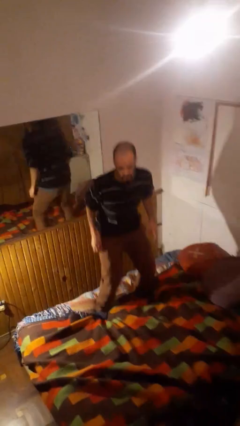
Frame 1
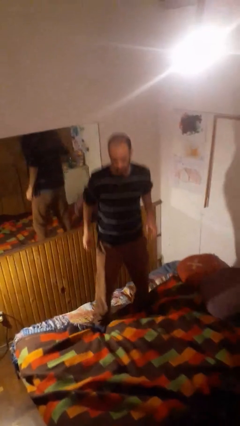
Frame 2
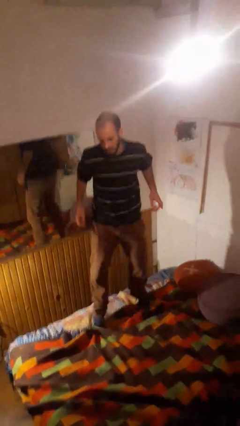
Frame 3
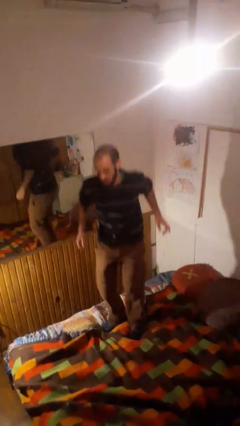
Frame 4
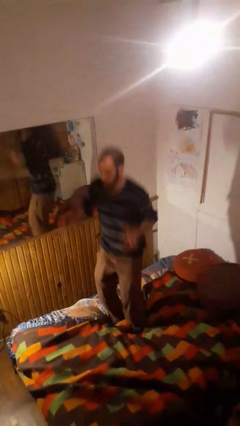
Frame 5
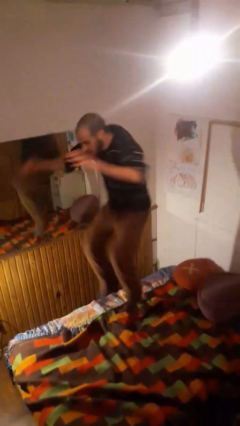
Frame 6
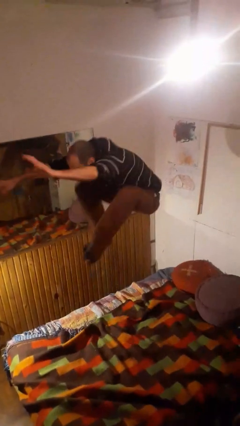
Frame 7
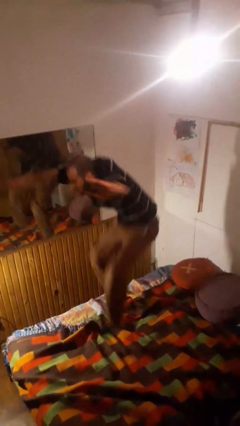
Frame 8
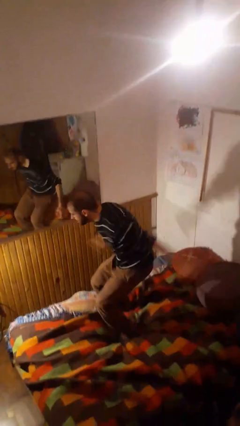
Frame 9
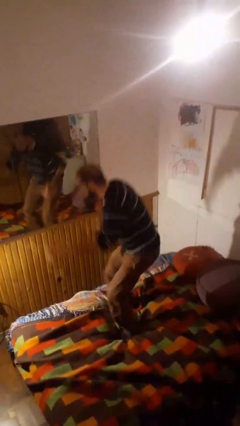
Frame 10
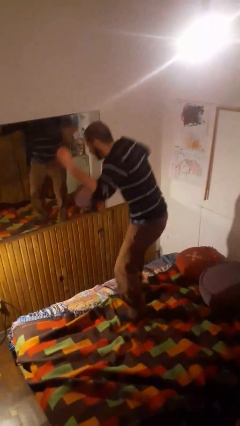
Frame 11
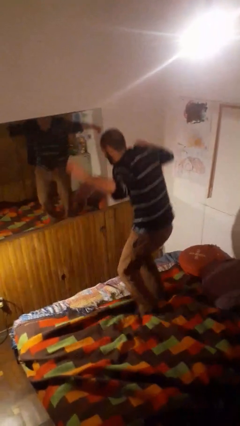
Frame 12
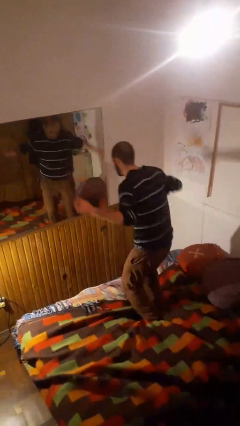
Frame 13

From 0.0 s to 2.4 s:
person jumps on bed

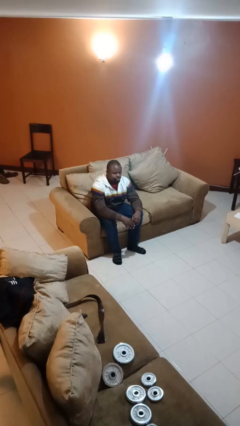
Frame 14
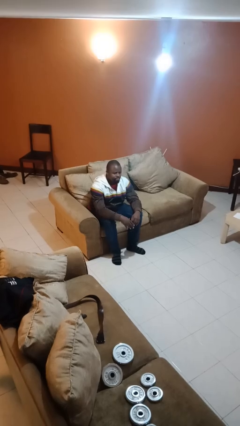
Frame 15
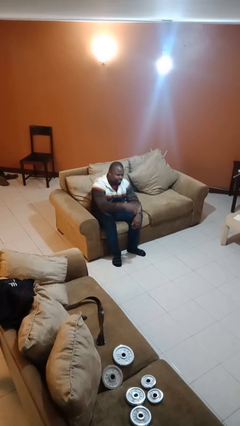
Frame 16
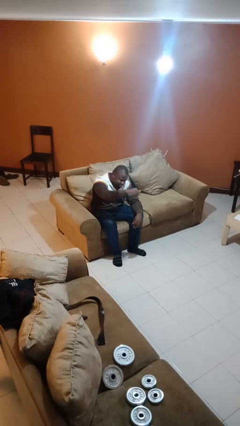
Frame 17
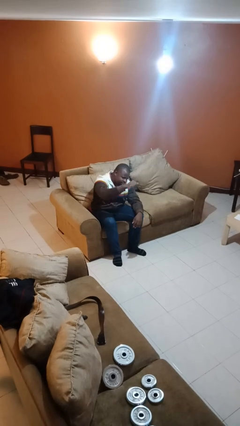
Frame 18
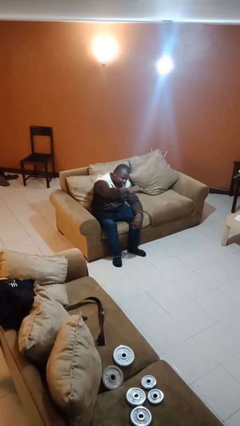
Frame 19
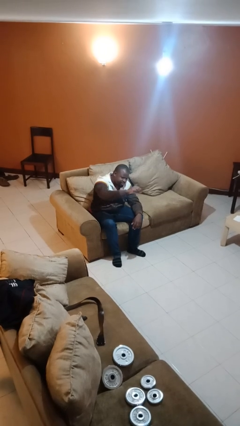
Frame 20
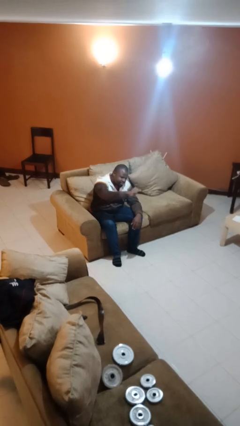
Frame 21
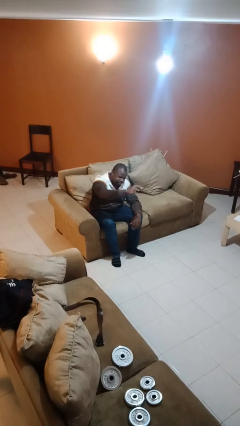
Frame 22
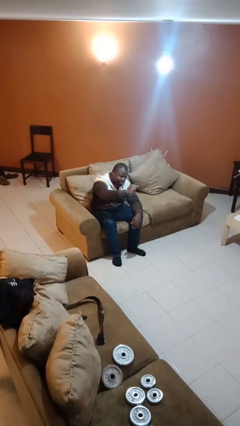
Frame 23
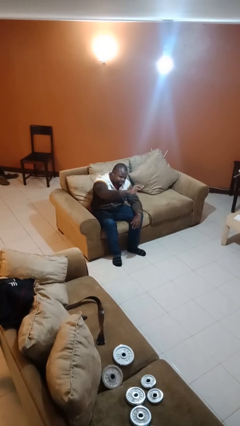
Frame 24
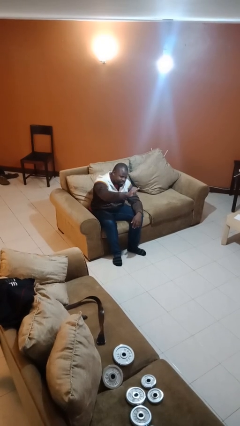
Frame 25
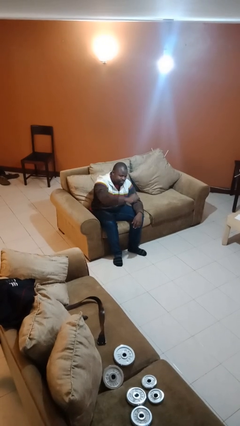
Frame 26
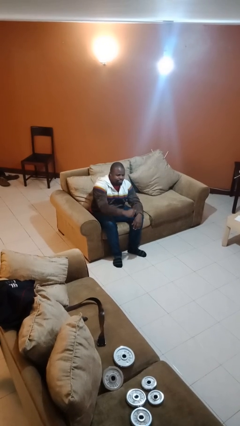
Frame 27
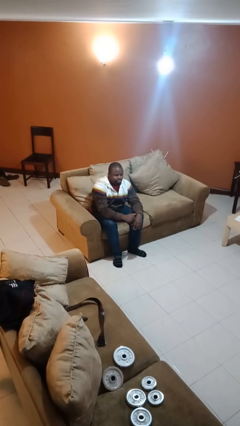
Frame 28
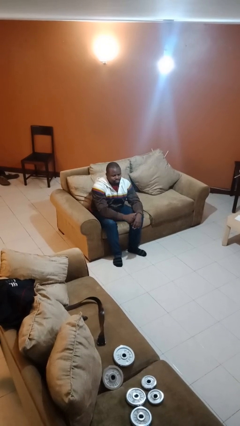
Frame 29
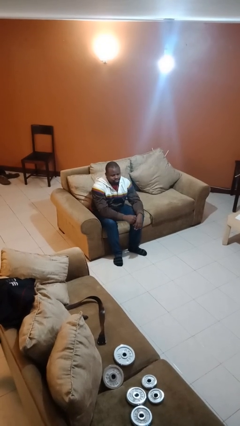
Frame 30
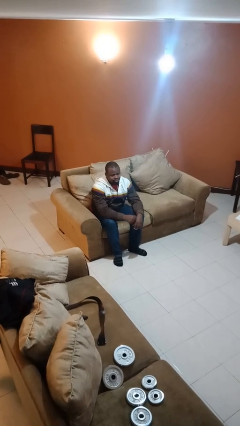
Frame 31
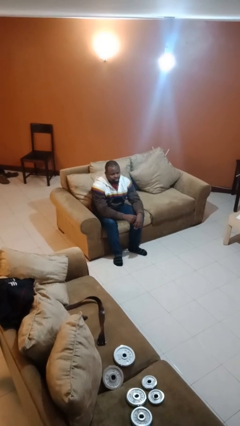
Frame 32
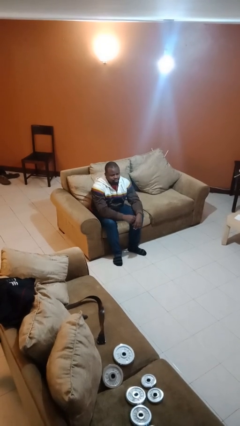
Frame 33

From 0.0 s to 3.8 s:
person gestures come here

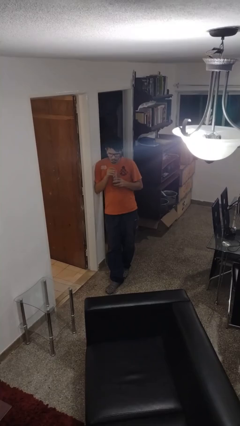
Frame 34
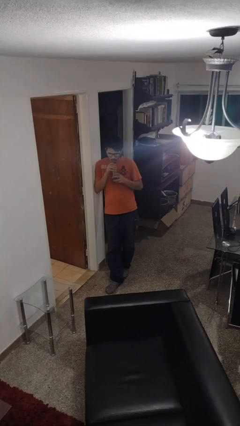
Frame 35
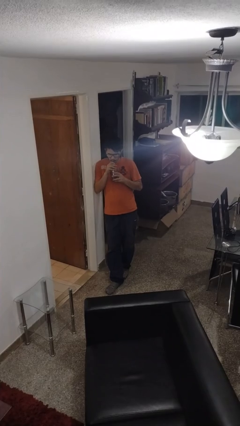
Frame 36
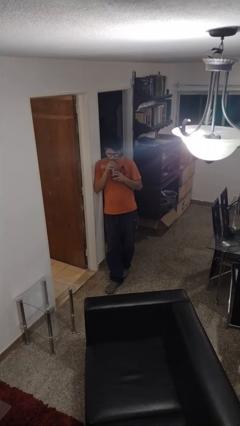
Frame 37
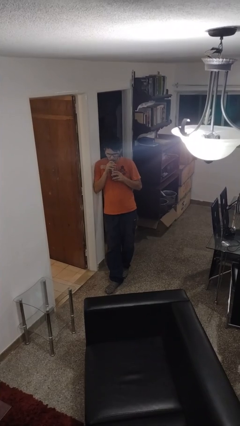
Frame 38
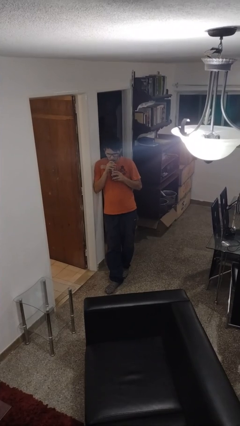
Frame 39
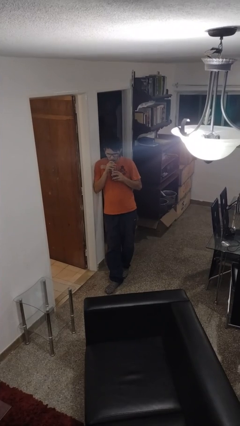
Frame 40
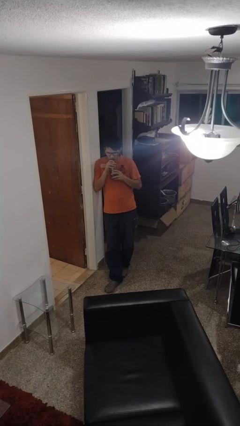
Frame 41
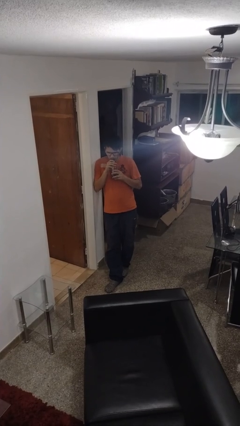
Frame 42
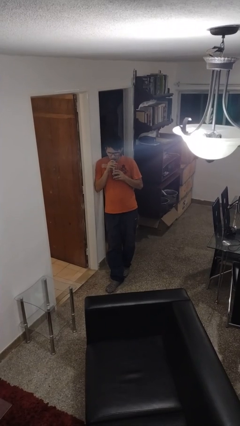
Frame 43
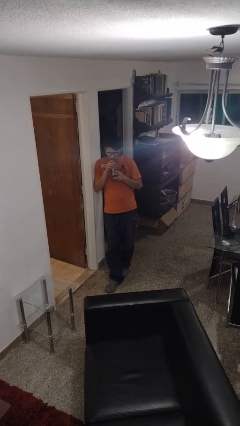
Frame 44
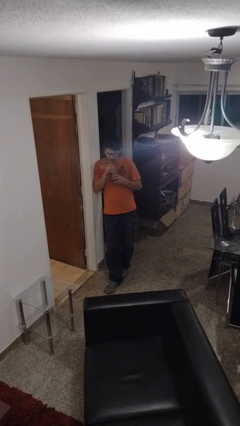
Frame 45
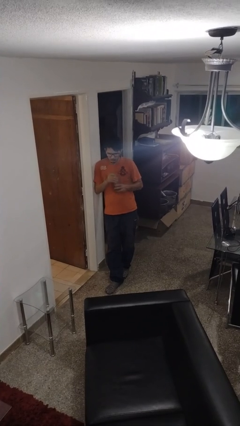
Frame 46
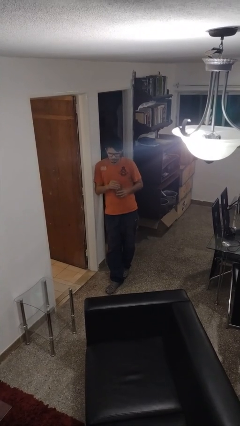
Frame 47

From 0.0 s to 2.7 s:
person drinks from straw

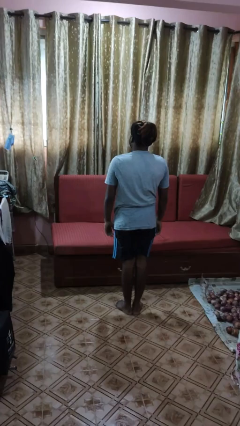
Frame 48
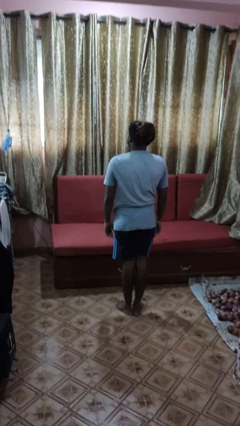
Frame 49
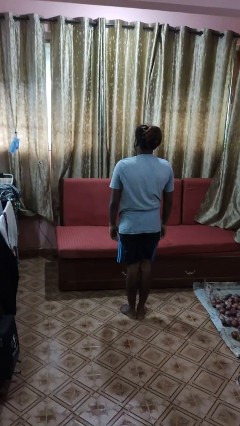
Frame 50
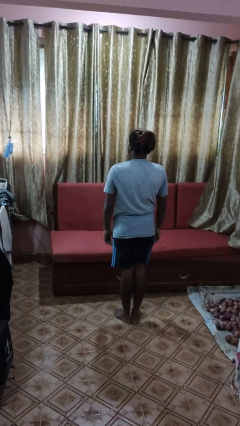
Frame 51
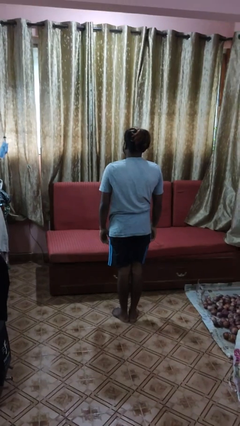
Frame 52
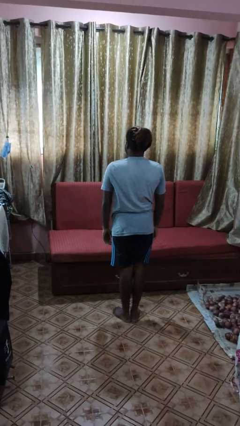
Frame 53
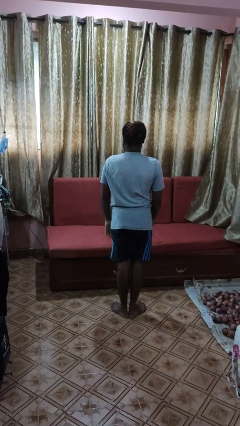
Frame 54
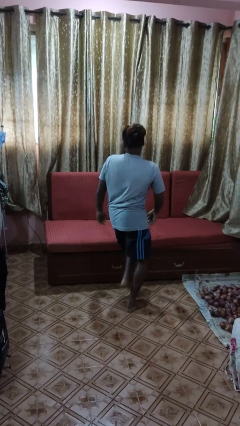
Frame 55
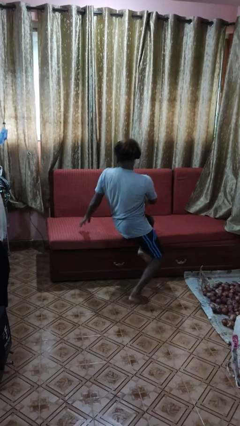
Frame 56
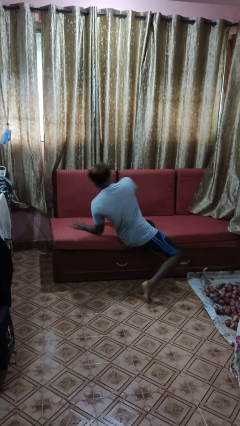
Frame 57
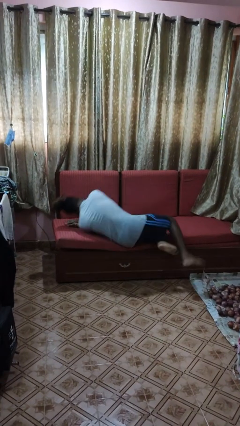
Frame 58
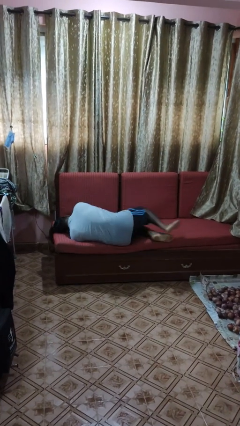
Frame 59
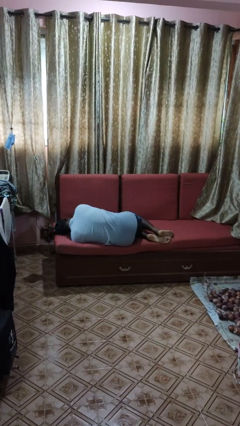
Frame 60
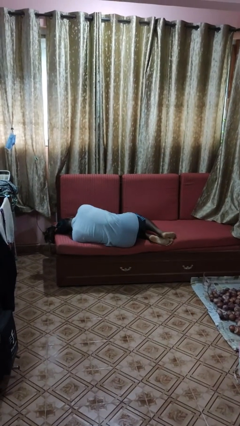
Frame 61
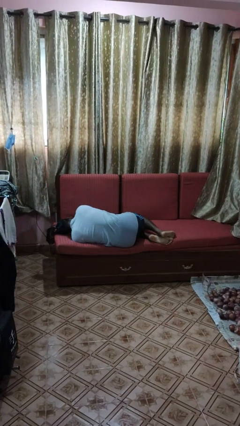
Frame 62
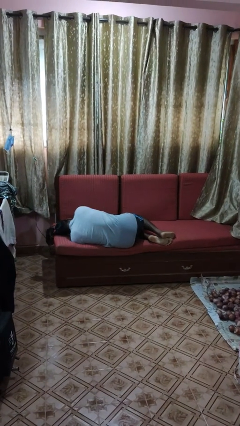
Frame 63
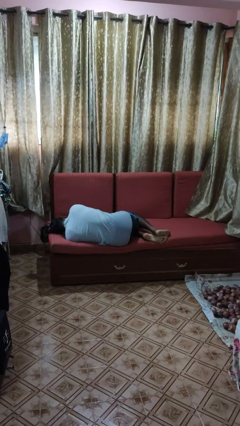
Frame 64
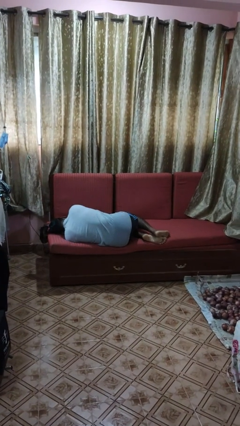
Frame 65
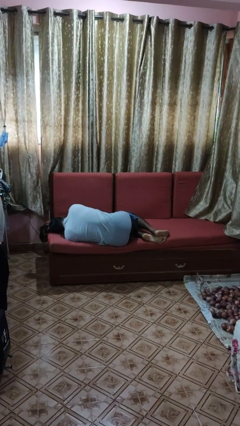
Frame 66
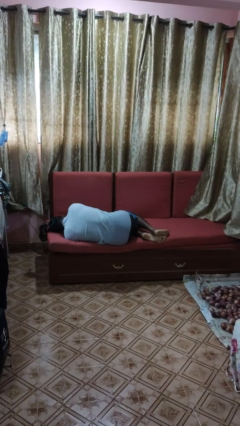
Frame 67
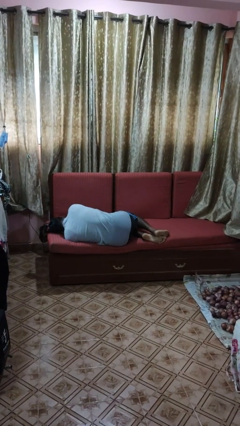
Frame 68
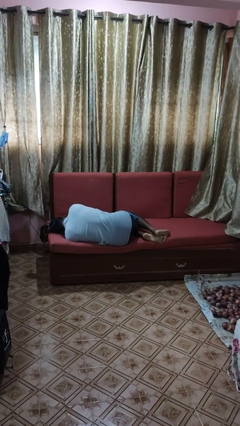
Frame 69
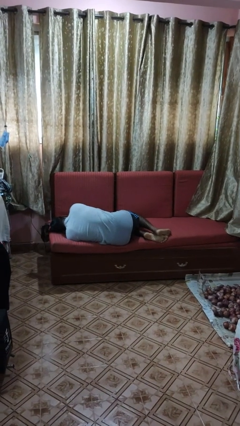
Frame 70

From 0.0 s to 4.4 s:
person lies down on couch

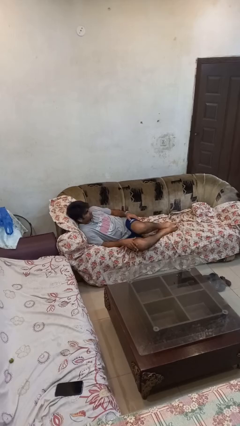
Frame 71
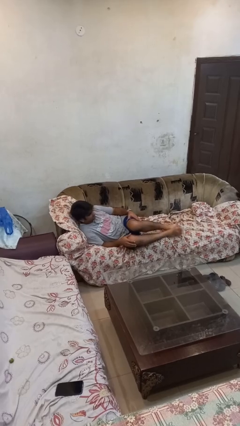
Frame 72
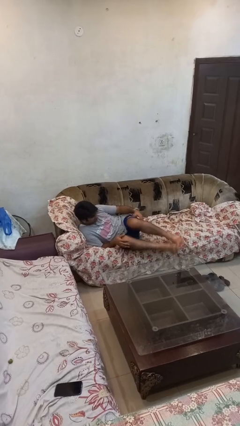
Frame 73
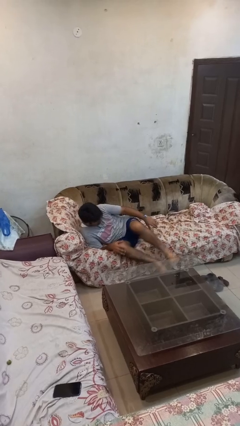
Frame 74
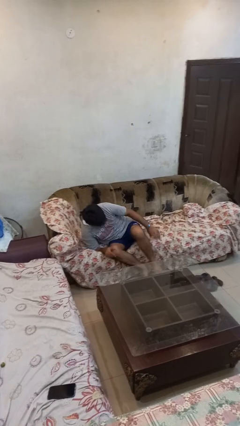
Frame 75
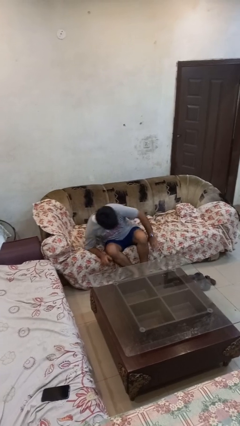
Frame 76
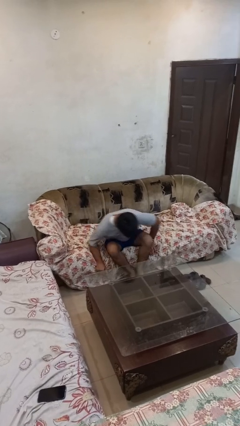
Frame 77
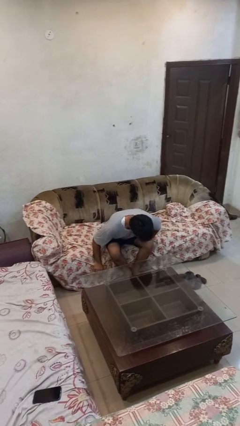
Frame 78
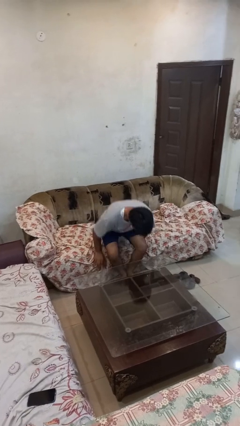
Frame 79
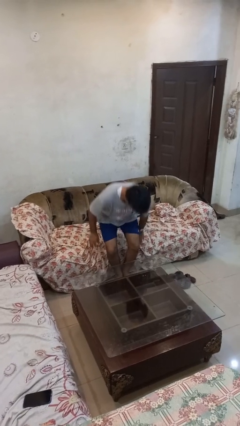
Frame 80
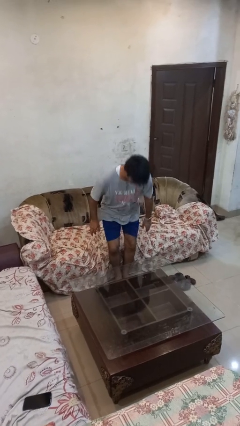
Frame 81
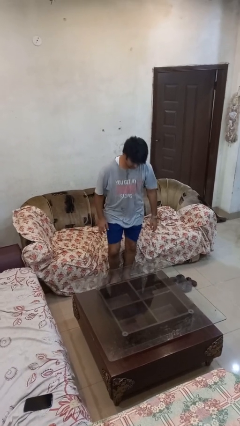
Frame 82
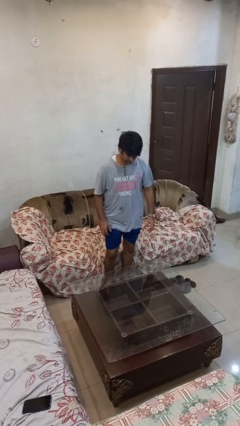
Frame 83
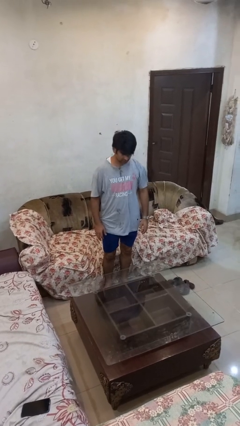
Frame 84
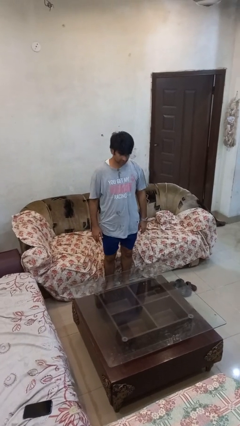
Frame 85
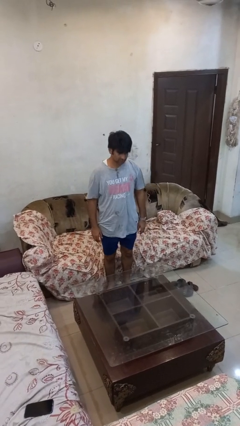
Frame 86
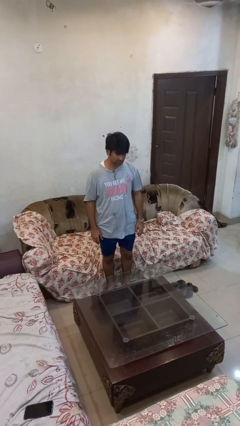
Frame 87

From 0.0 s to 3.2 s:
person stands up

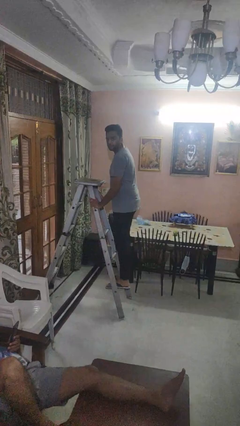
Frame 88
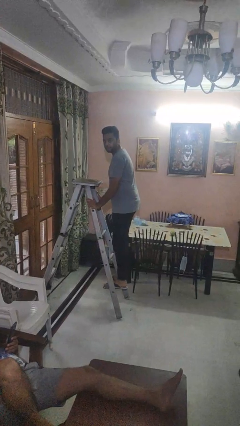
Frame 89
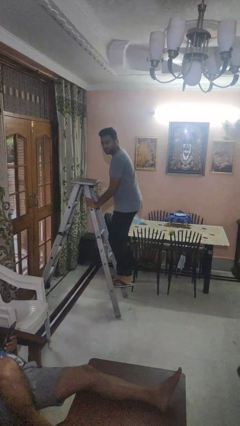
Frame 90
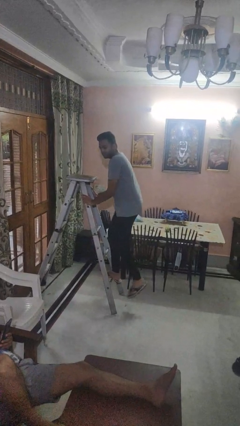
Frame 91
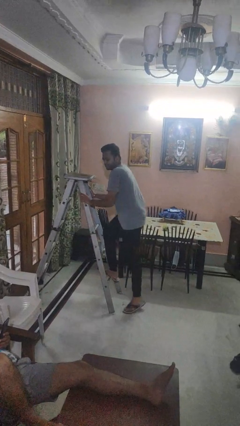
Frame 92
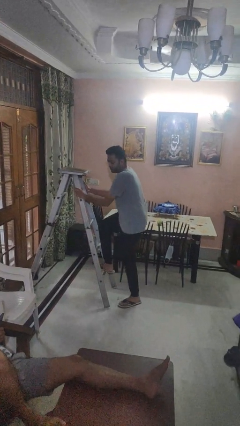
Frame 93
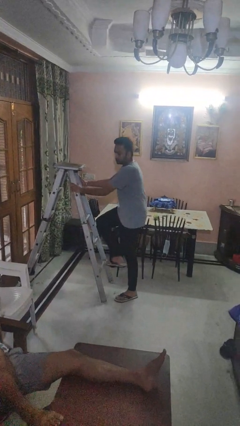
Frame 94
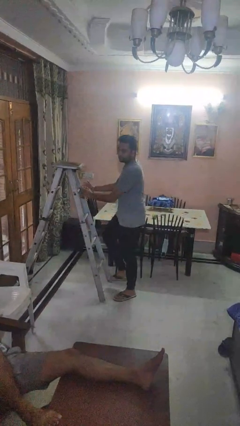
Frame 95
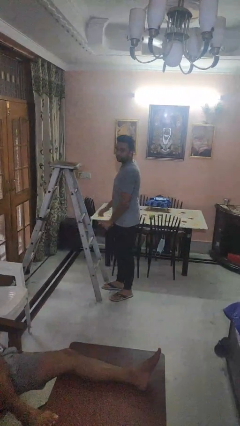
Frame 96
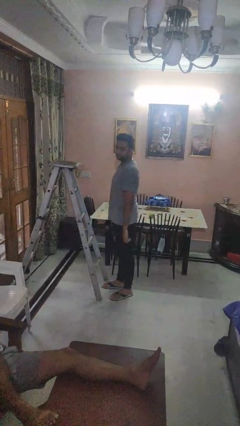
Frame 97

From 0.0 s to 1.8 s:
person climbs down ladder
